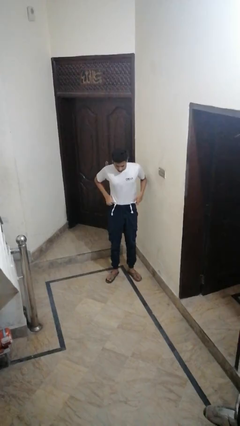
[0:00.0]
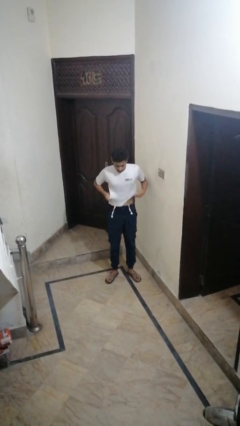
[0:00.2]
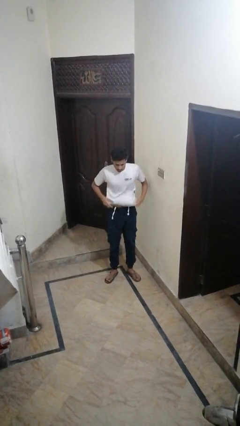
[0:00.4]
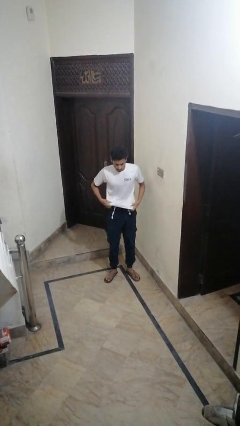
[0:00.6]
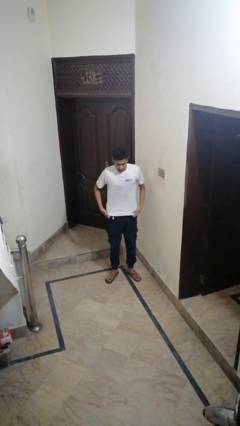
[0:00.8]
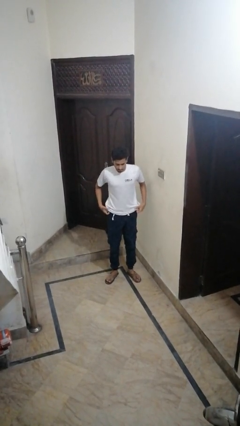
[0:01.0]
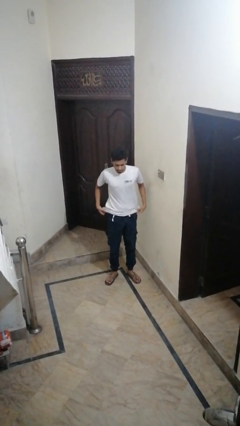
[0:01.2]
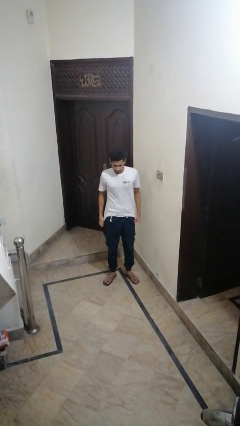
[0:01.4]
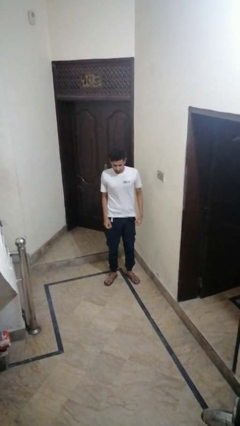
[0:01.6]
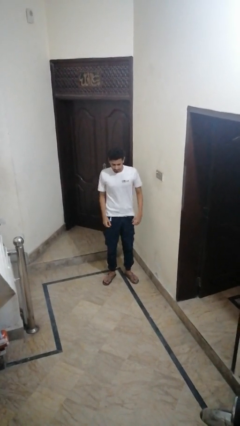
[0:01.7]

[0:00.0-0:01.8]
person untucks shirt

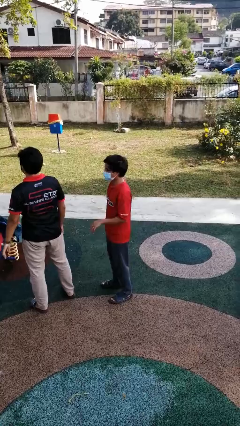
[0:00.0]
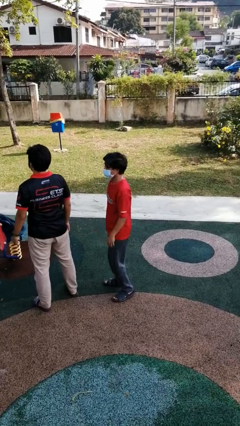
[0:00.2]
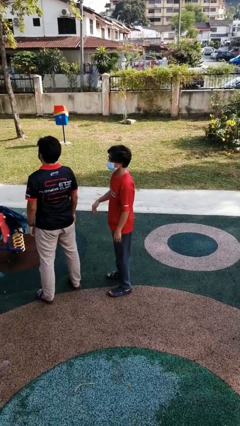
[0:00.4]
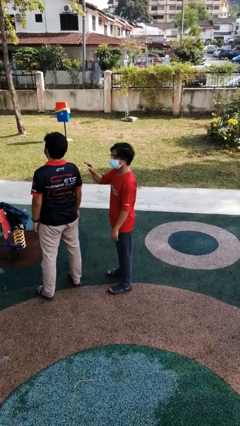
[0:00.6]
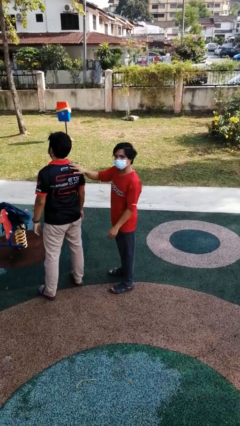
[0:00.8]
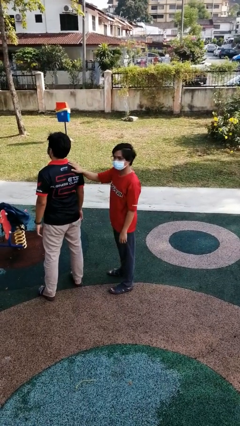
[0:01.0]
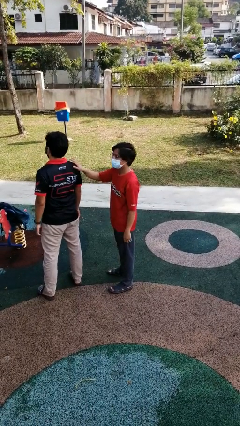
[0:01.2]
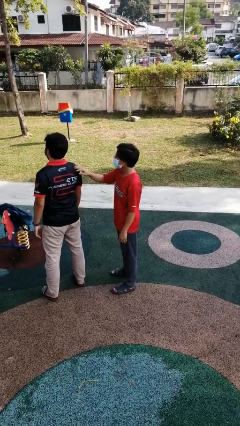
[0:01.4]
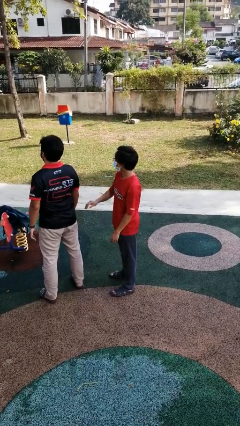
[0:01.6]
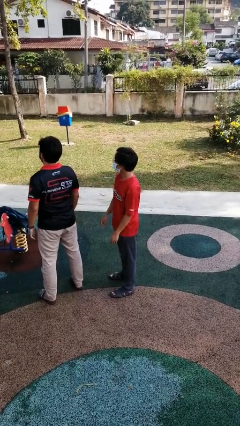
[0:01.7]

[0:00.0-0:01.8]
person touches back of person

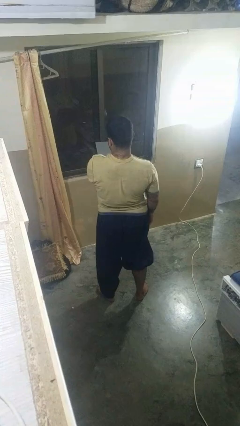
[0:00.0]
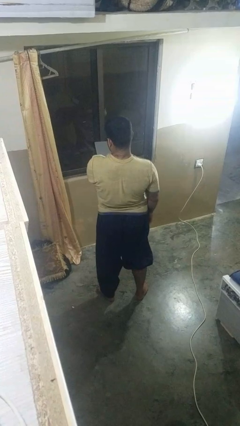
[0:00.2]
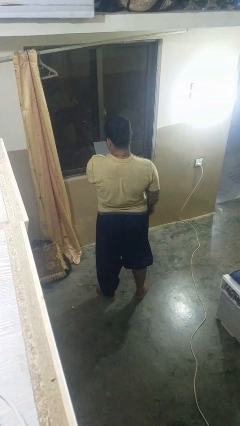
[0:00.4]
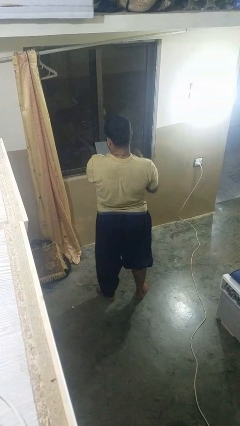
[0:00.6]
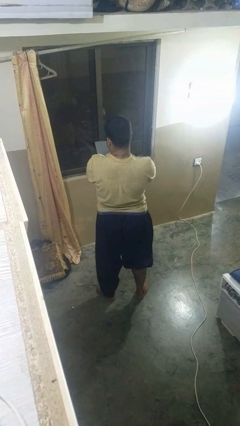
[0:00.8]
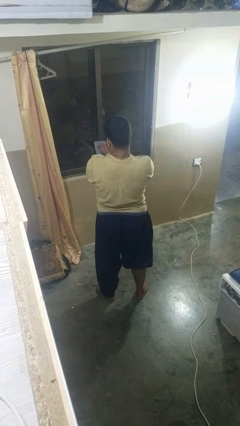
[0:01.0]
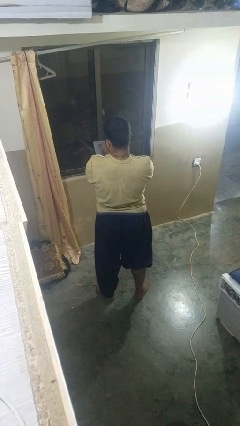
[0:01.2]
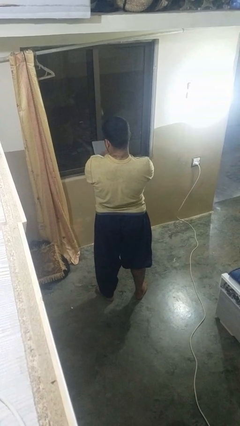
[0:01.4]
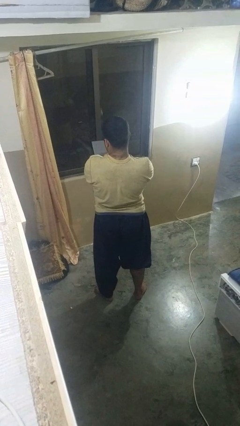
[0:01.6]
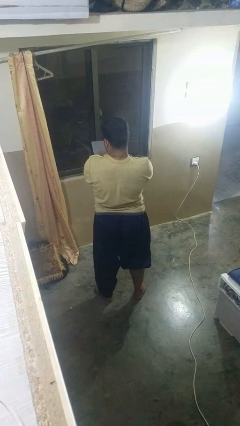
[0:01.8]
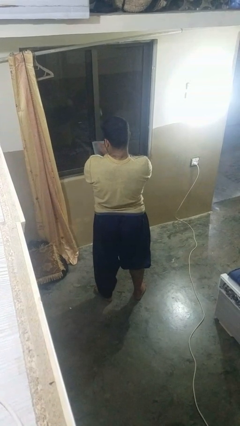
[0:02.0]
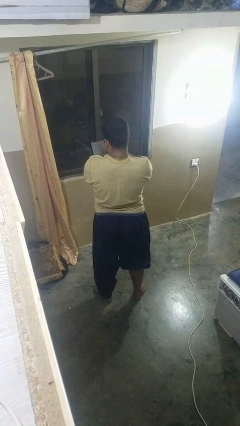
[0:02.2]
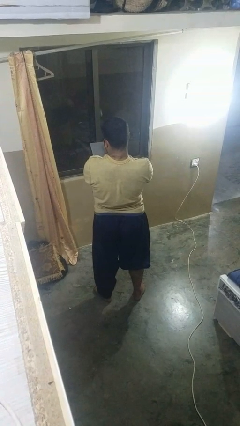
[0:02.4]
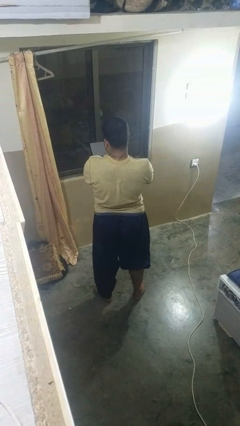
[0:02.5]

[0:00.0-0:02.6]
person interacts with tablet

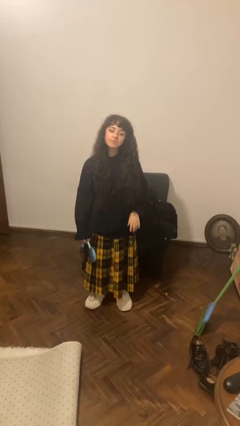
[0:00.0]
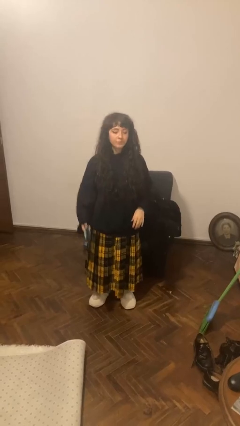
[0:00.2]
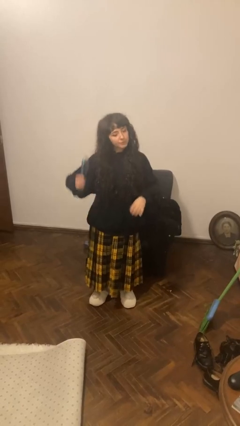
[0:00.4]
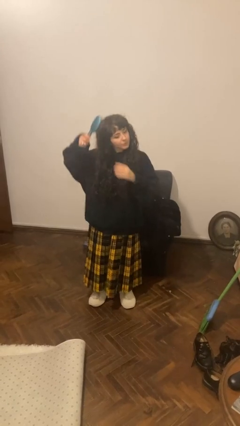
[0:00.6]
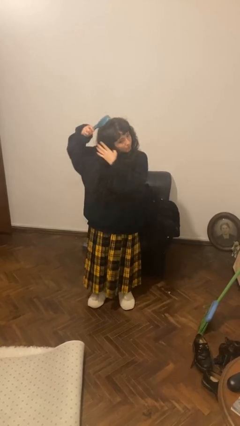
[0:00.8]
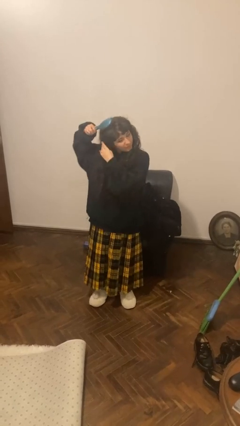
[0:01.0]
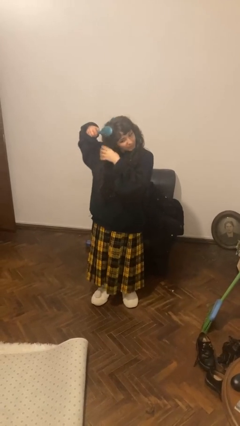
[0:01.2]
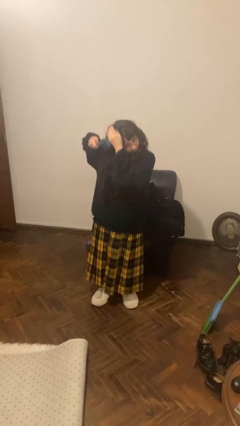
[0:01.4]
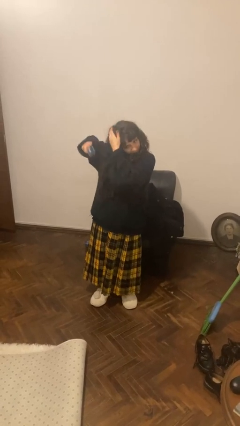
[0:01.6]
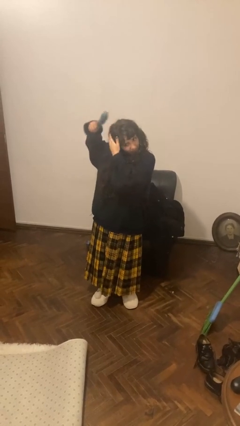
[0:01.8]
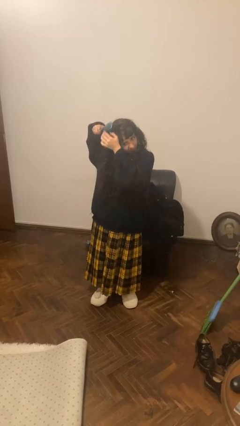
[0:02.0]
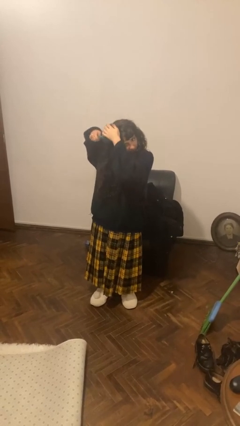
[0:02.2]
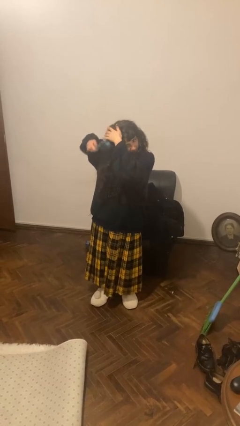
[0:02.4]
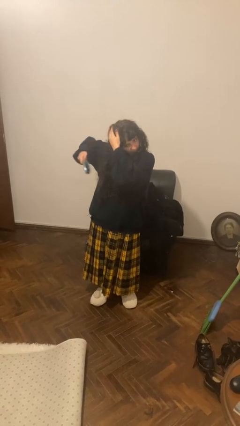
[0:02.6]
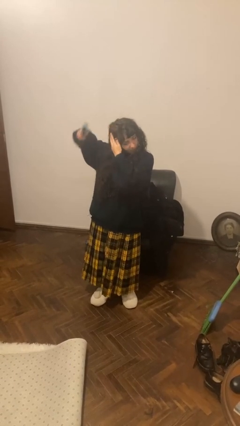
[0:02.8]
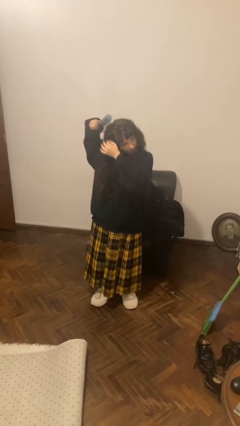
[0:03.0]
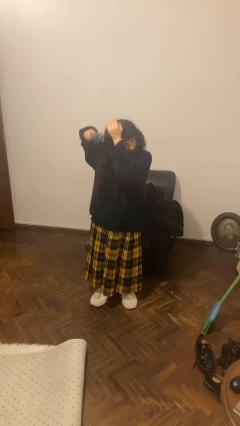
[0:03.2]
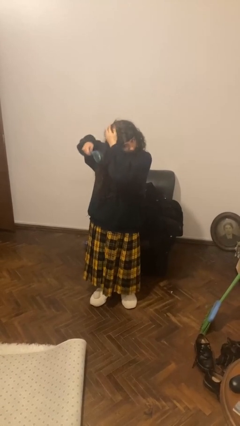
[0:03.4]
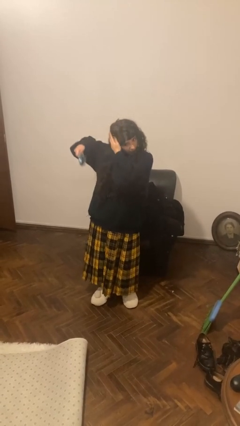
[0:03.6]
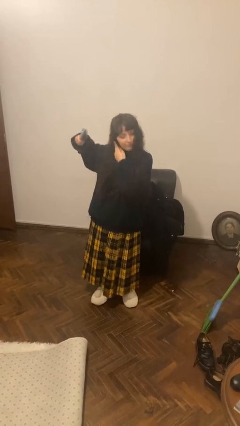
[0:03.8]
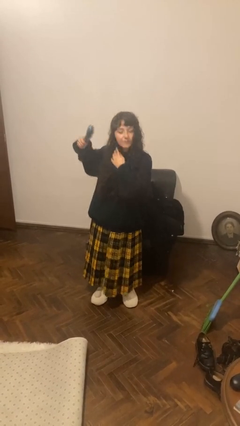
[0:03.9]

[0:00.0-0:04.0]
person brushes hair

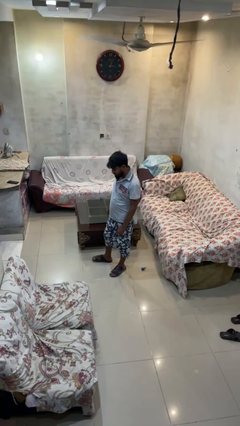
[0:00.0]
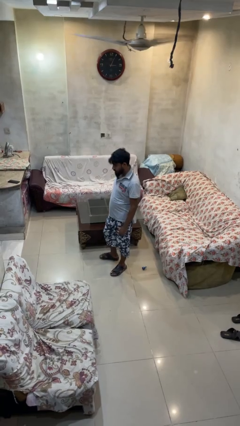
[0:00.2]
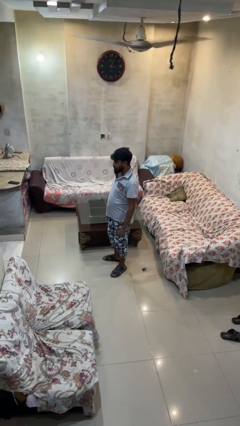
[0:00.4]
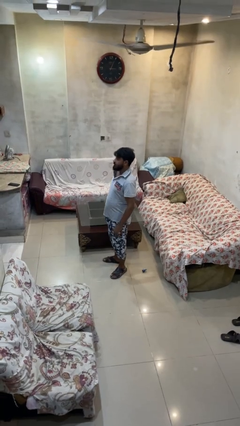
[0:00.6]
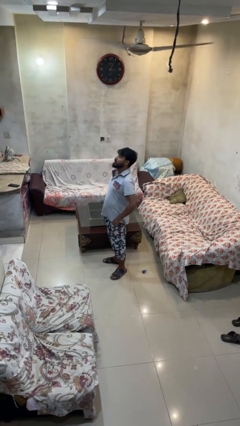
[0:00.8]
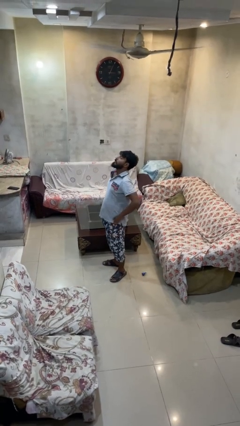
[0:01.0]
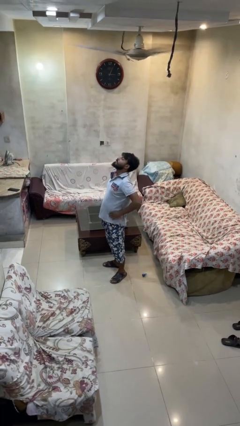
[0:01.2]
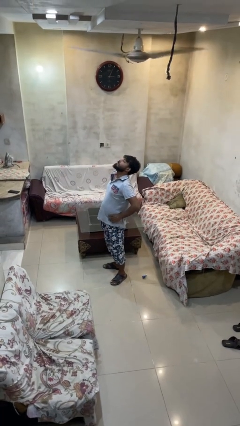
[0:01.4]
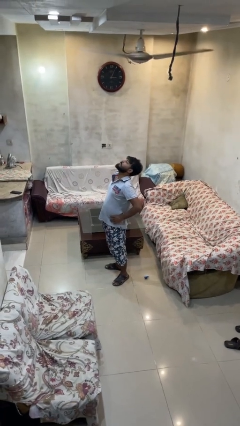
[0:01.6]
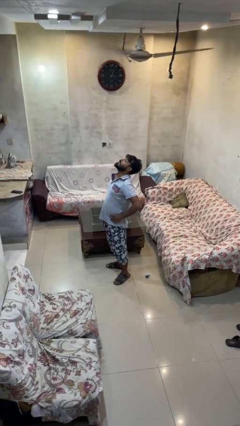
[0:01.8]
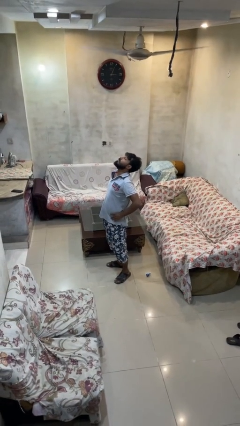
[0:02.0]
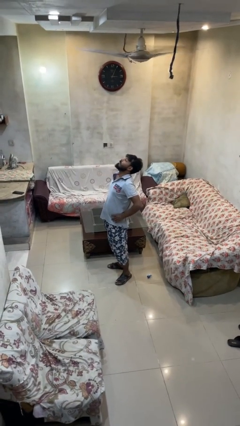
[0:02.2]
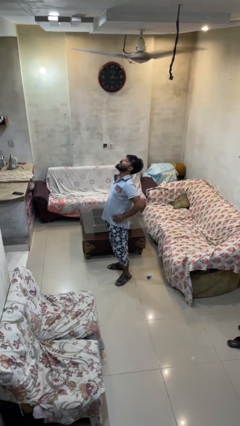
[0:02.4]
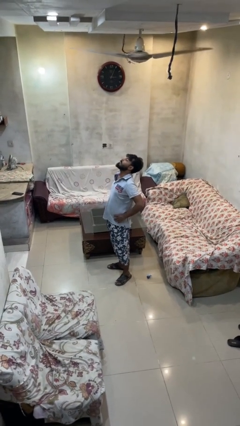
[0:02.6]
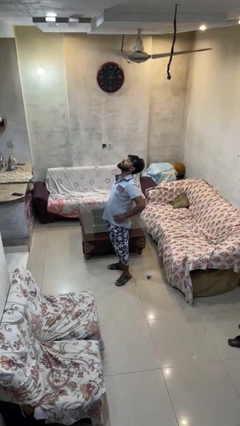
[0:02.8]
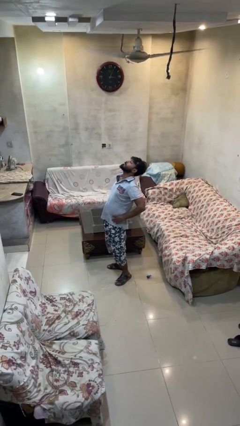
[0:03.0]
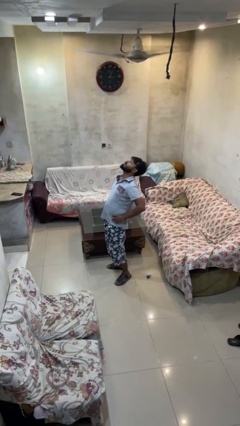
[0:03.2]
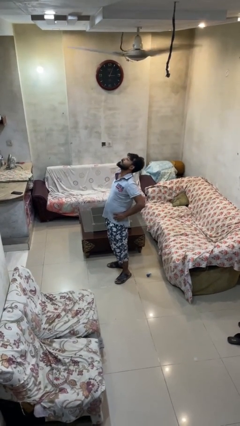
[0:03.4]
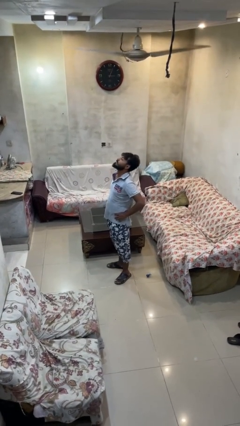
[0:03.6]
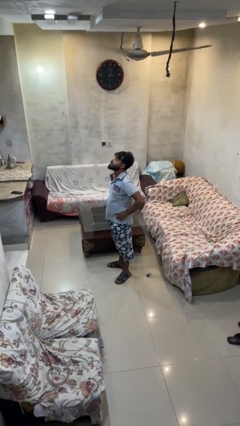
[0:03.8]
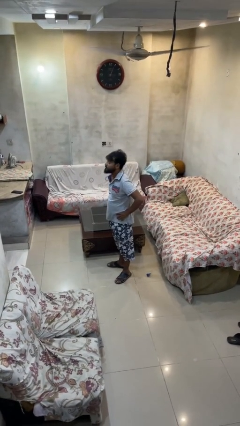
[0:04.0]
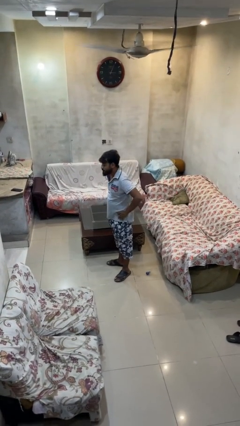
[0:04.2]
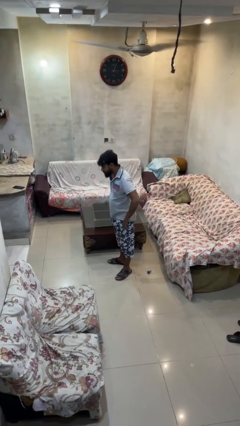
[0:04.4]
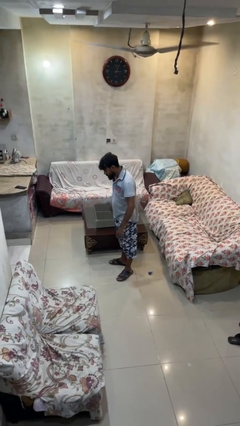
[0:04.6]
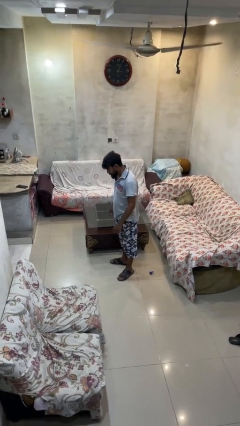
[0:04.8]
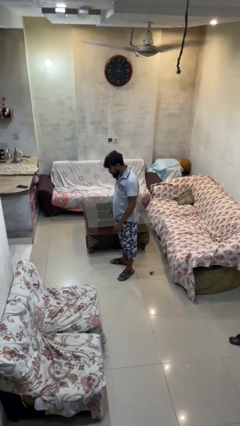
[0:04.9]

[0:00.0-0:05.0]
person stretches back

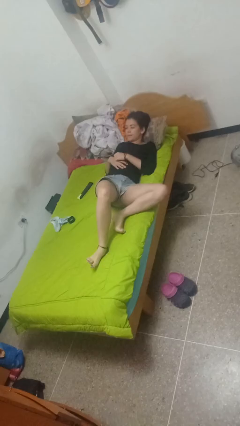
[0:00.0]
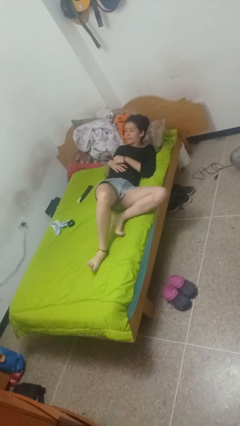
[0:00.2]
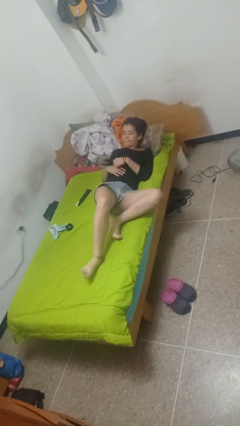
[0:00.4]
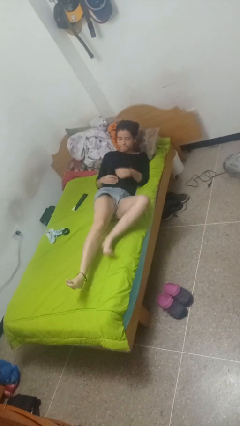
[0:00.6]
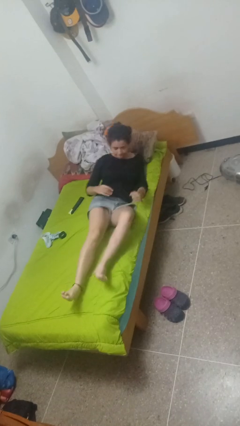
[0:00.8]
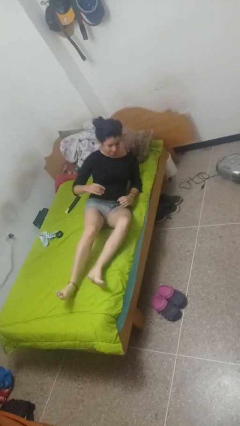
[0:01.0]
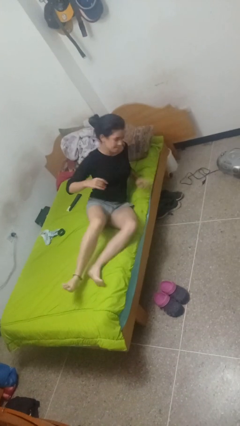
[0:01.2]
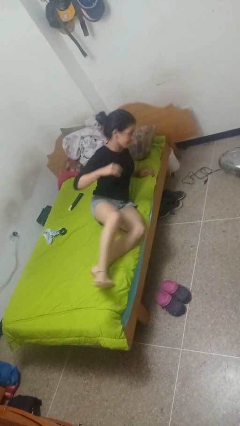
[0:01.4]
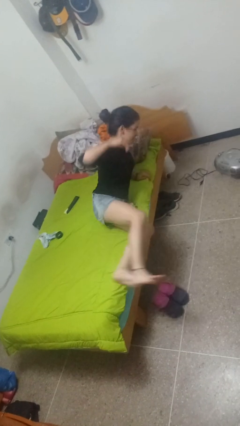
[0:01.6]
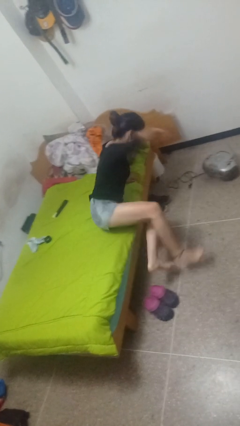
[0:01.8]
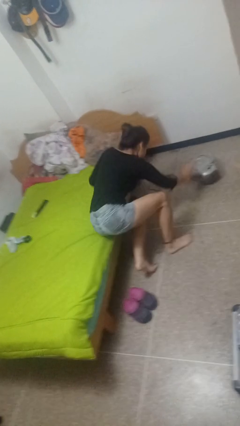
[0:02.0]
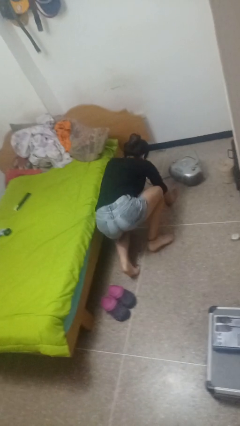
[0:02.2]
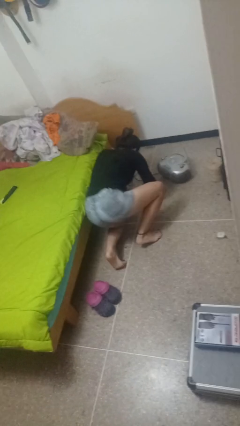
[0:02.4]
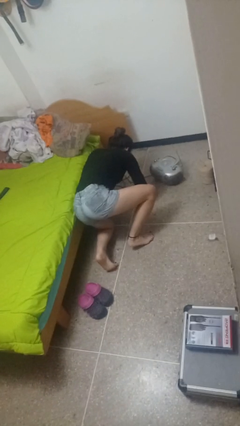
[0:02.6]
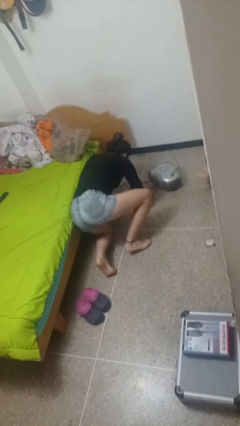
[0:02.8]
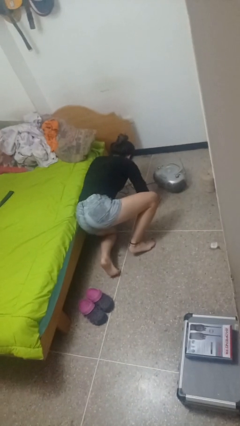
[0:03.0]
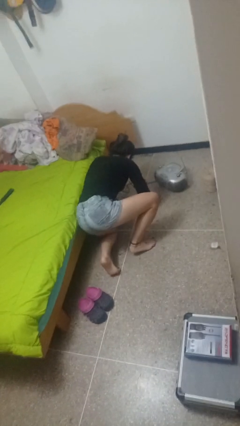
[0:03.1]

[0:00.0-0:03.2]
person falls from bed
